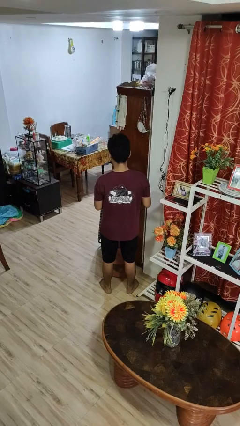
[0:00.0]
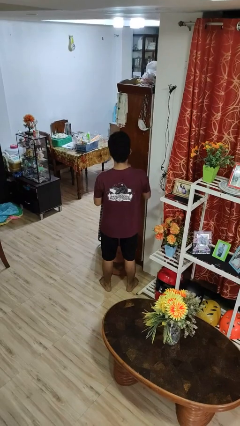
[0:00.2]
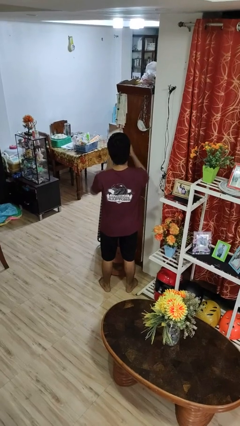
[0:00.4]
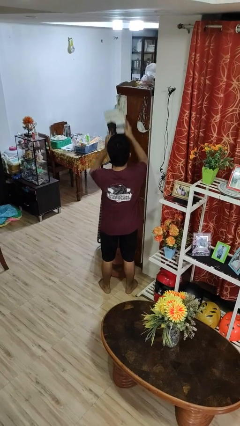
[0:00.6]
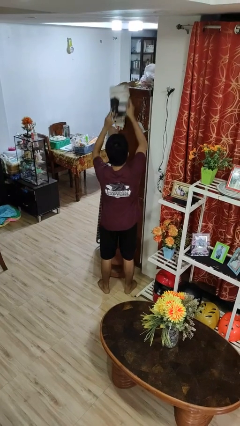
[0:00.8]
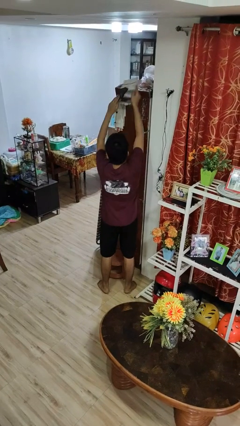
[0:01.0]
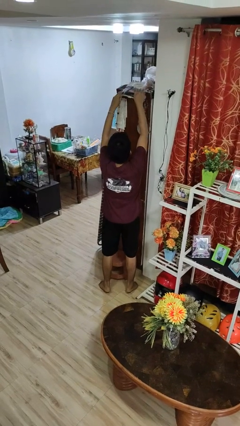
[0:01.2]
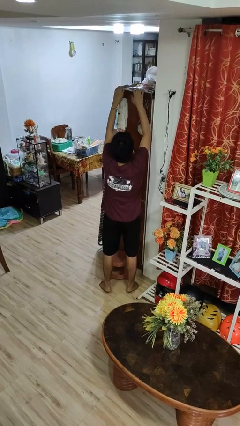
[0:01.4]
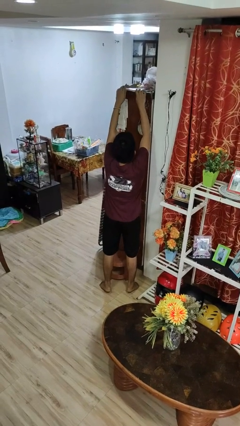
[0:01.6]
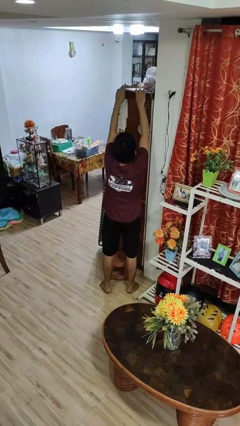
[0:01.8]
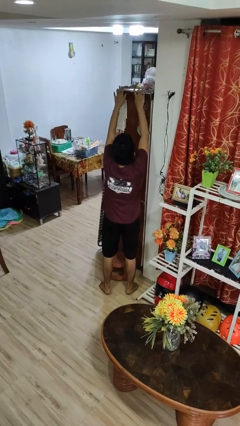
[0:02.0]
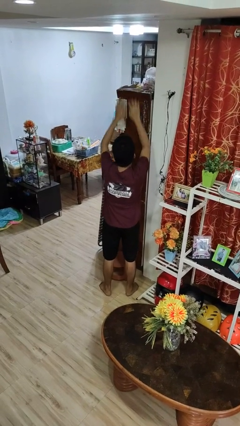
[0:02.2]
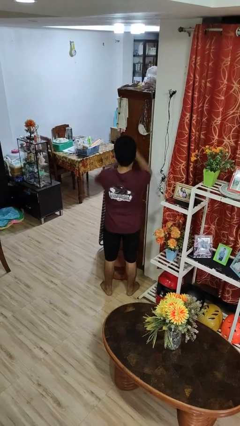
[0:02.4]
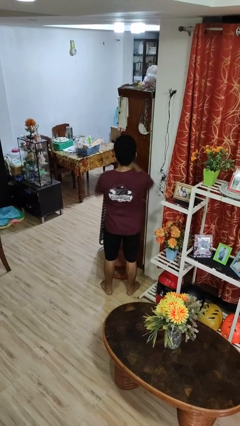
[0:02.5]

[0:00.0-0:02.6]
person puts down object on shelf

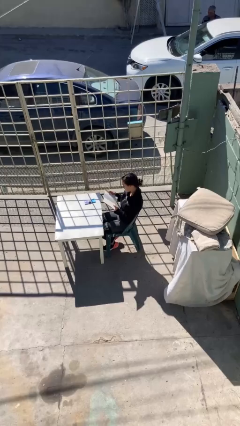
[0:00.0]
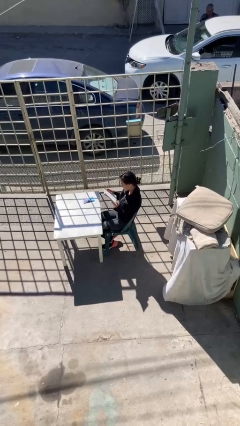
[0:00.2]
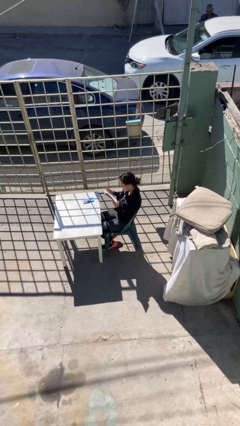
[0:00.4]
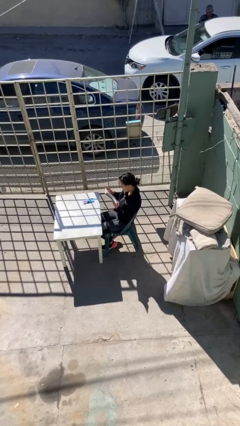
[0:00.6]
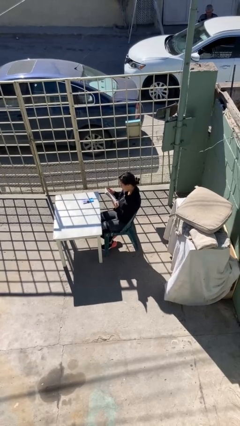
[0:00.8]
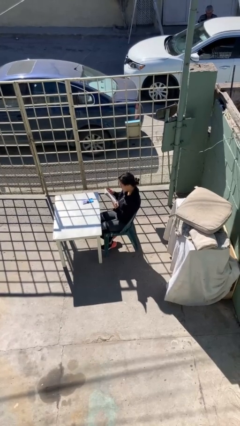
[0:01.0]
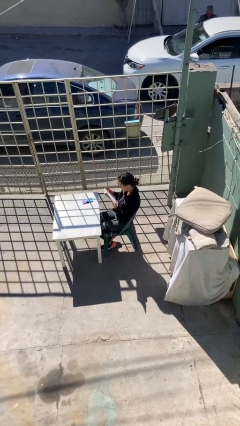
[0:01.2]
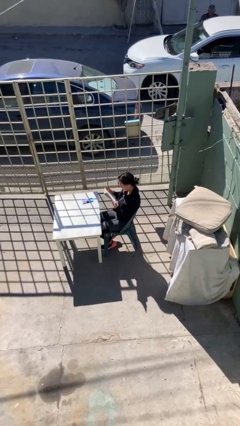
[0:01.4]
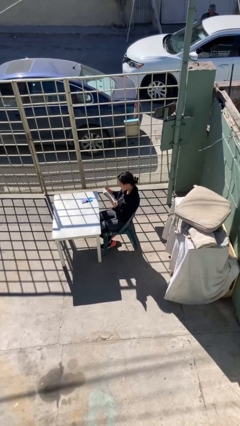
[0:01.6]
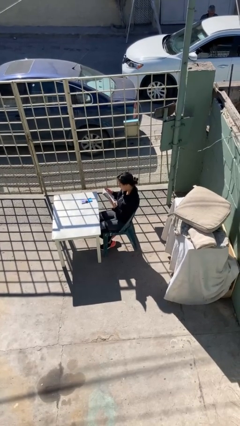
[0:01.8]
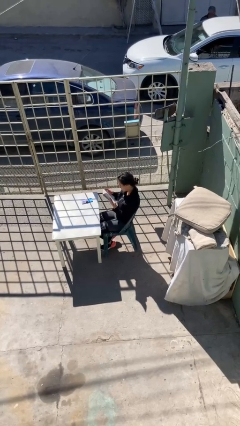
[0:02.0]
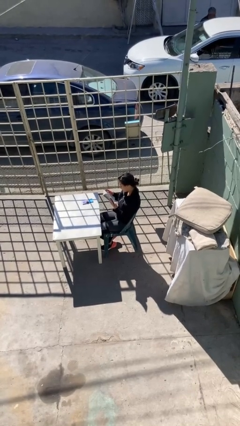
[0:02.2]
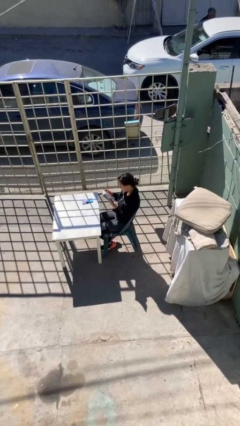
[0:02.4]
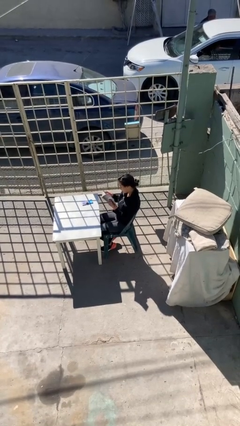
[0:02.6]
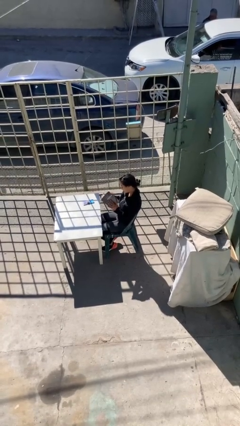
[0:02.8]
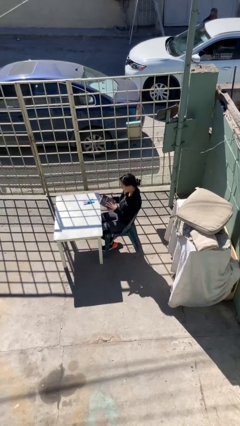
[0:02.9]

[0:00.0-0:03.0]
person reads document

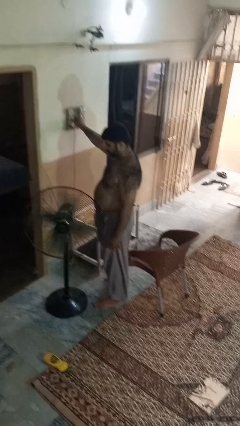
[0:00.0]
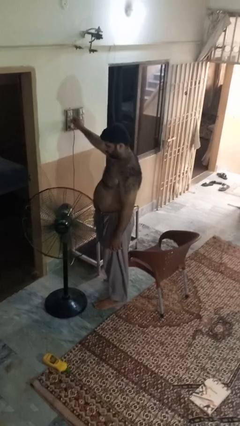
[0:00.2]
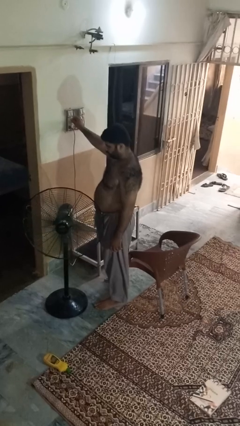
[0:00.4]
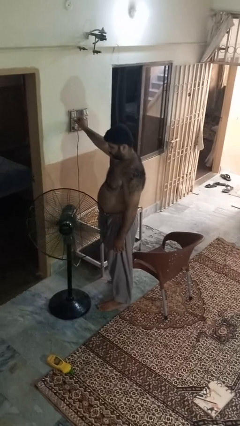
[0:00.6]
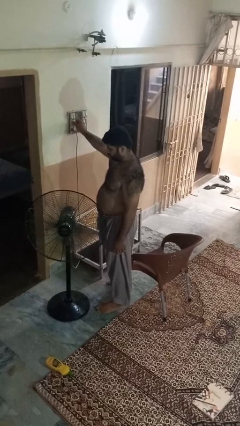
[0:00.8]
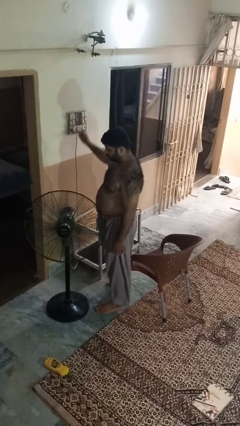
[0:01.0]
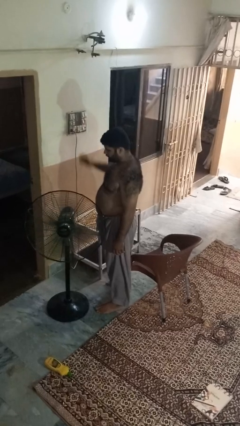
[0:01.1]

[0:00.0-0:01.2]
person turns off fan

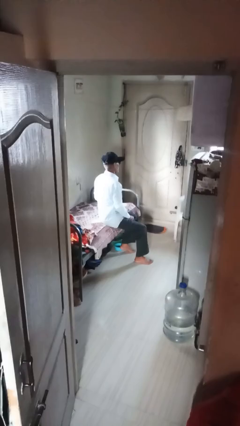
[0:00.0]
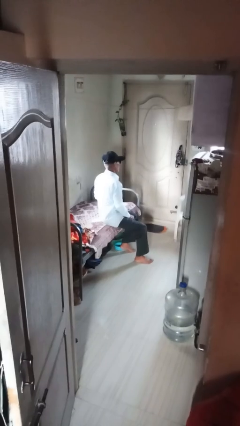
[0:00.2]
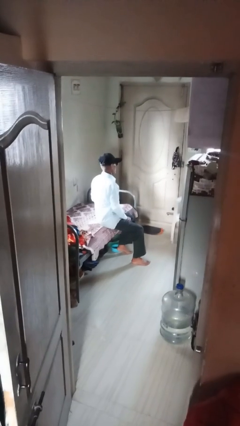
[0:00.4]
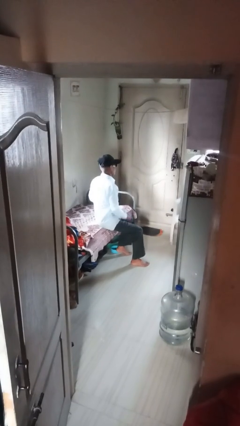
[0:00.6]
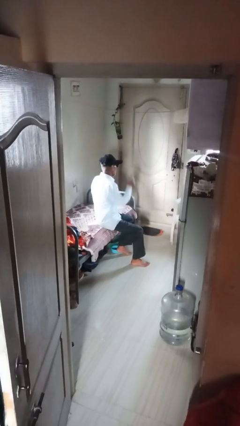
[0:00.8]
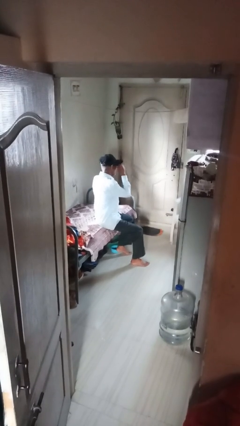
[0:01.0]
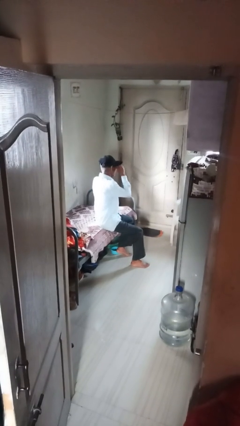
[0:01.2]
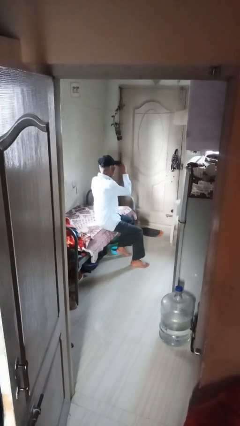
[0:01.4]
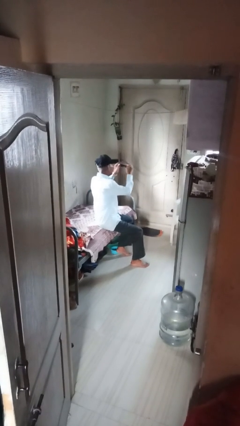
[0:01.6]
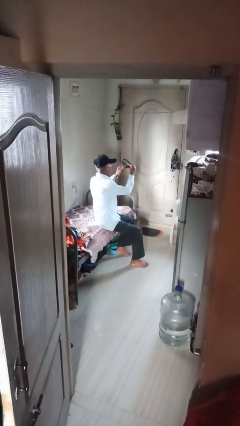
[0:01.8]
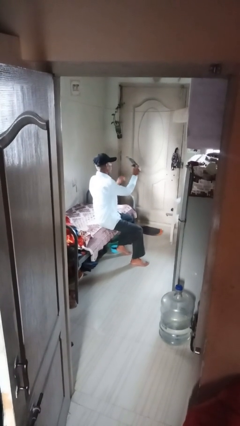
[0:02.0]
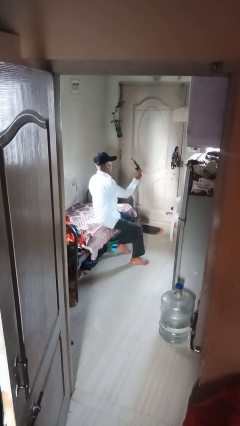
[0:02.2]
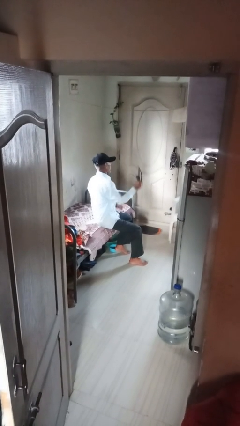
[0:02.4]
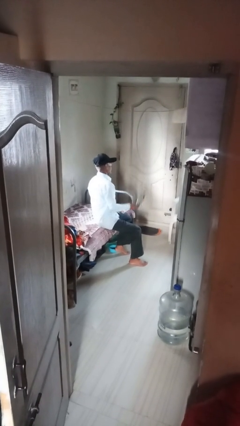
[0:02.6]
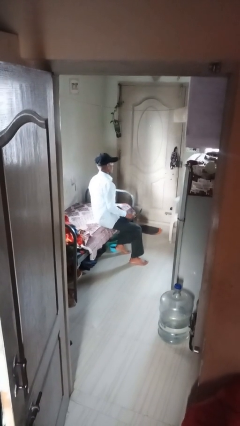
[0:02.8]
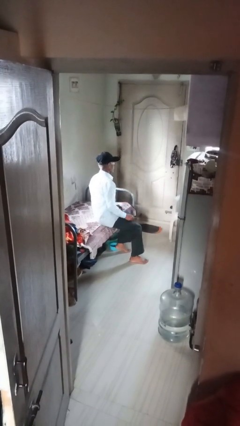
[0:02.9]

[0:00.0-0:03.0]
person takes off sunglasses

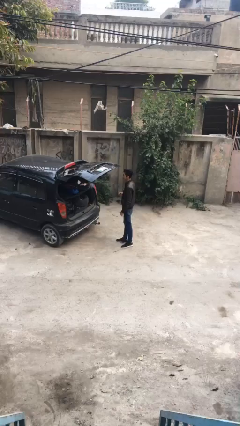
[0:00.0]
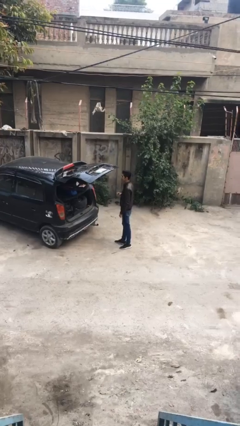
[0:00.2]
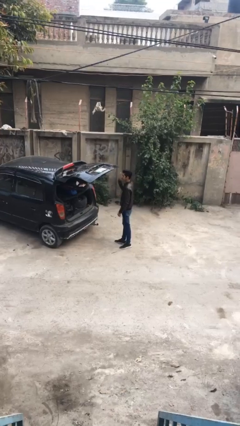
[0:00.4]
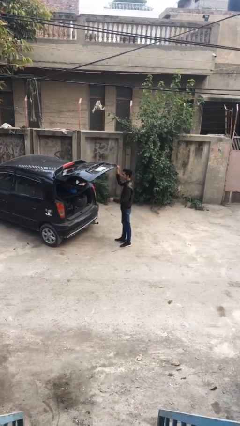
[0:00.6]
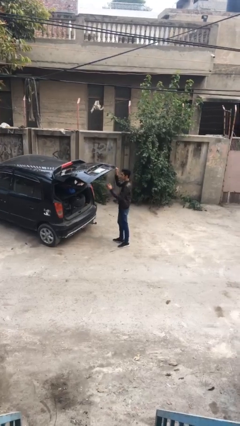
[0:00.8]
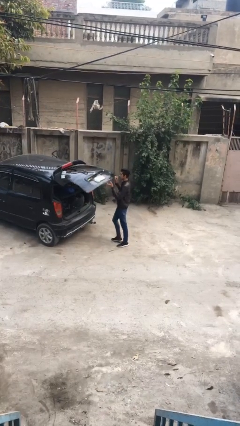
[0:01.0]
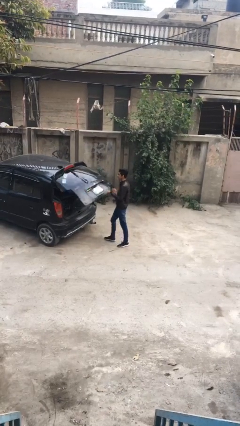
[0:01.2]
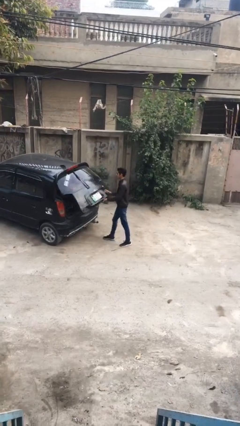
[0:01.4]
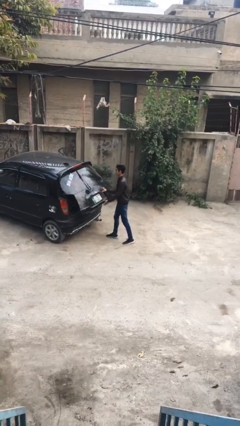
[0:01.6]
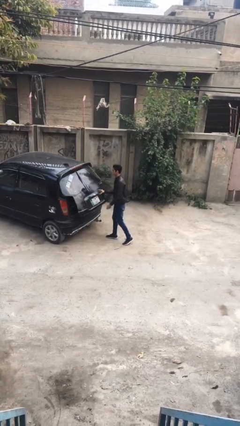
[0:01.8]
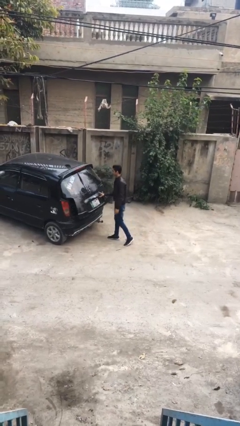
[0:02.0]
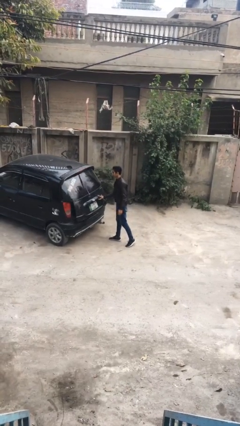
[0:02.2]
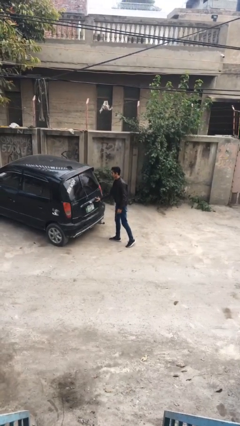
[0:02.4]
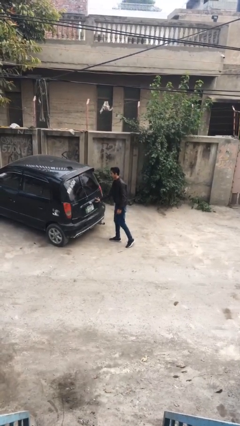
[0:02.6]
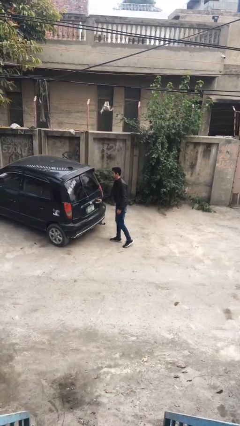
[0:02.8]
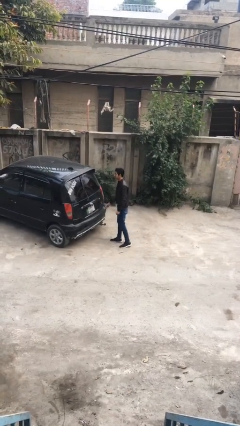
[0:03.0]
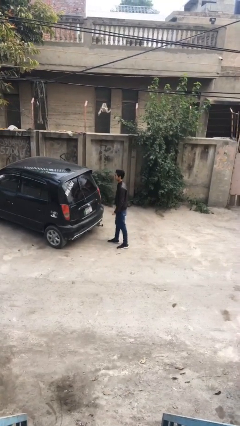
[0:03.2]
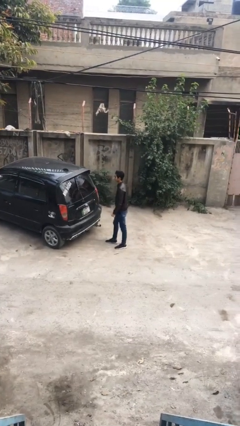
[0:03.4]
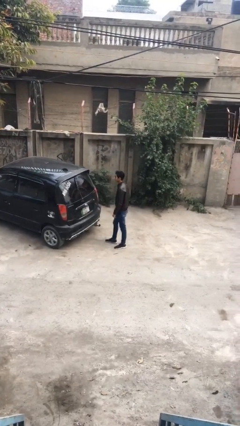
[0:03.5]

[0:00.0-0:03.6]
person closes car trunk

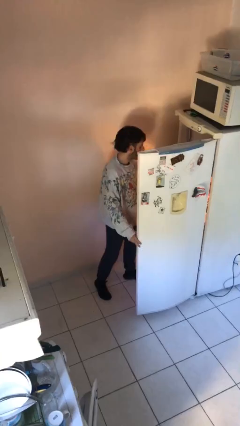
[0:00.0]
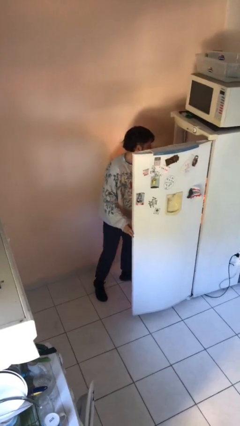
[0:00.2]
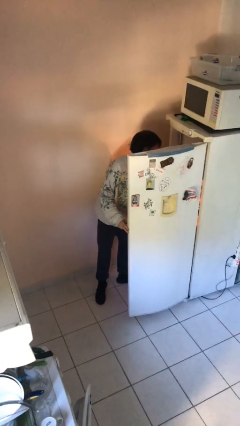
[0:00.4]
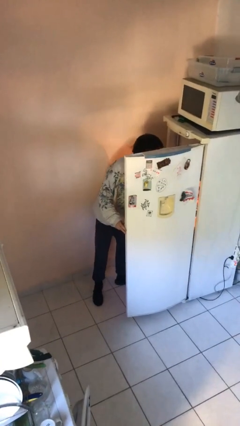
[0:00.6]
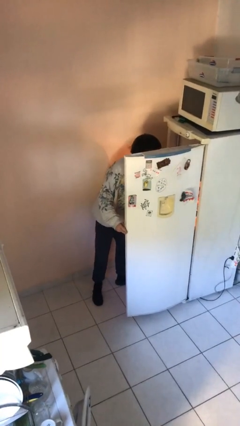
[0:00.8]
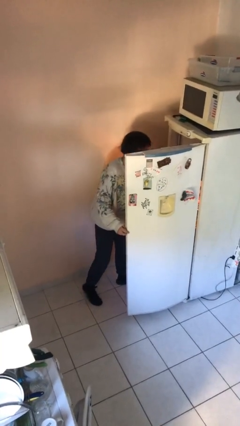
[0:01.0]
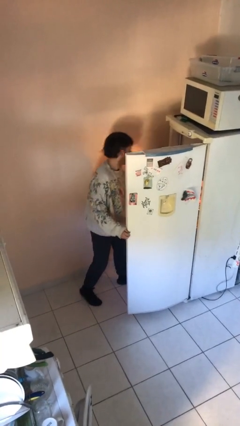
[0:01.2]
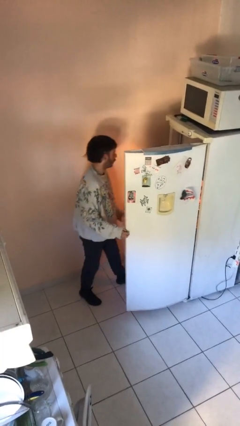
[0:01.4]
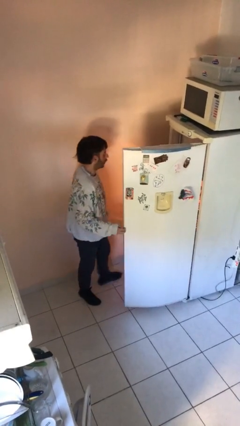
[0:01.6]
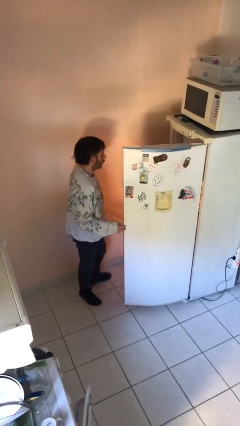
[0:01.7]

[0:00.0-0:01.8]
person takes object from refrigerator

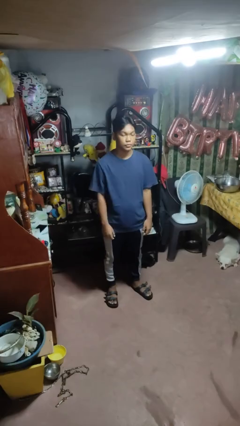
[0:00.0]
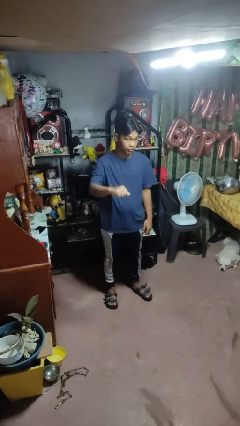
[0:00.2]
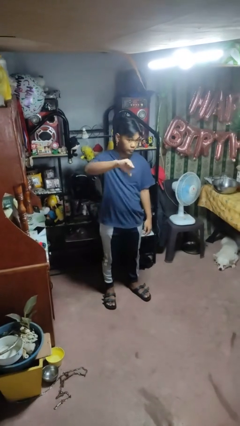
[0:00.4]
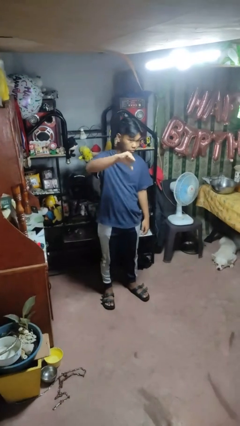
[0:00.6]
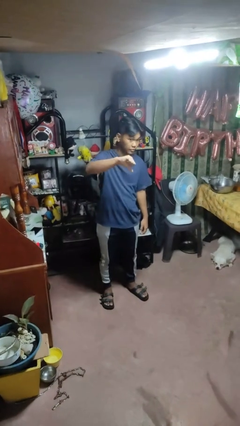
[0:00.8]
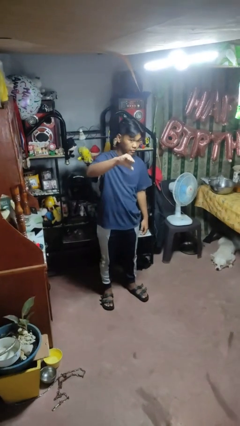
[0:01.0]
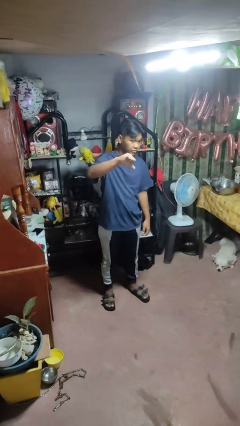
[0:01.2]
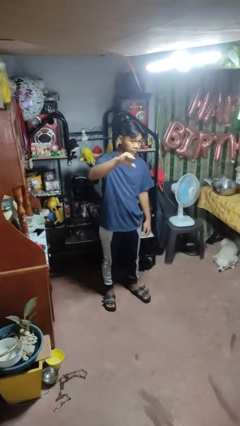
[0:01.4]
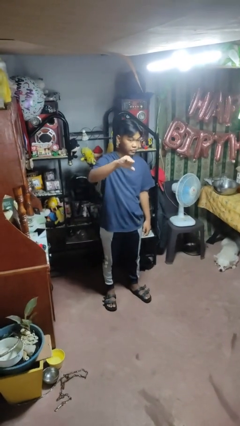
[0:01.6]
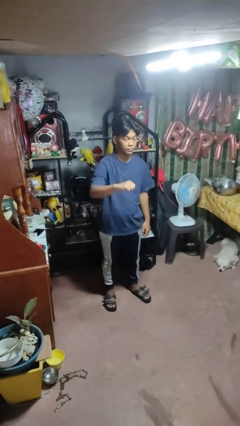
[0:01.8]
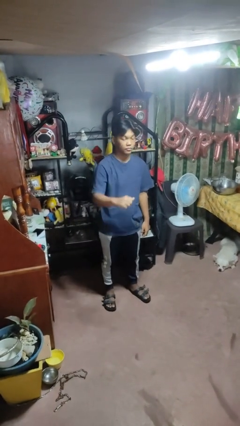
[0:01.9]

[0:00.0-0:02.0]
person gestures thumbs down
